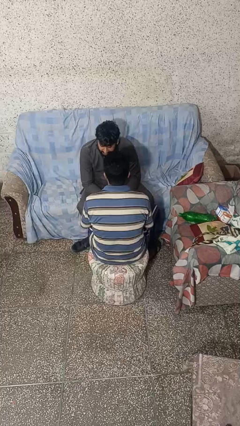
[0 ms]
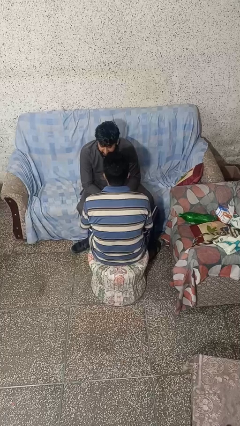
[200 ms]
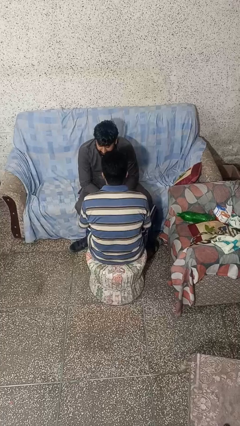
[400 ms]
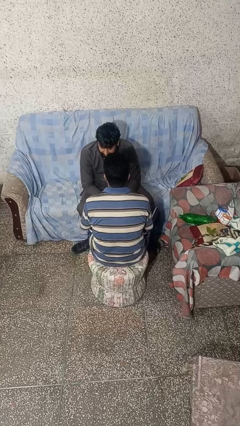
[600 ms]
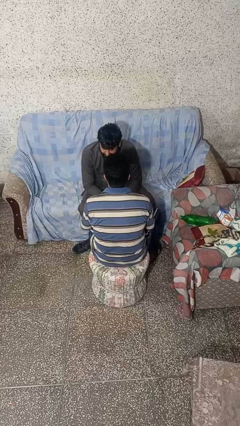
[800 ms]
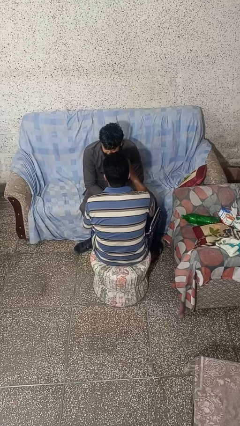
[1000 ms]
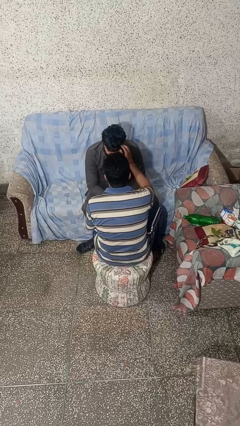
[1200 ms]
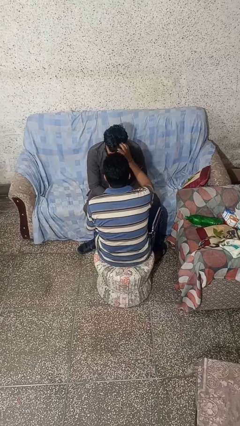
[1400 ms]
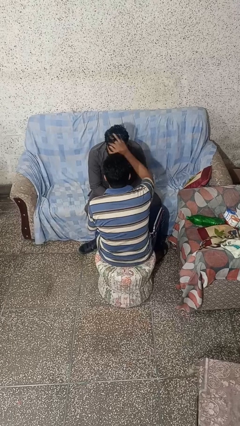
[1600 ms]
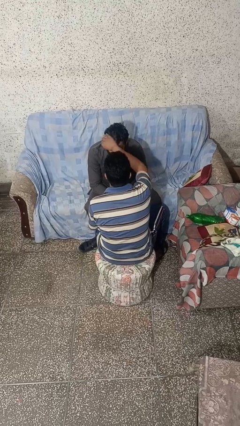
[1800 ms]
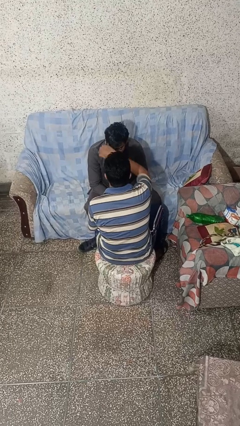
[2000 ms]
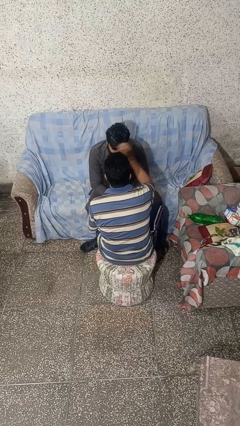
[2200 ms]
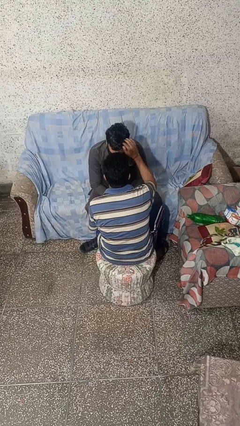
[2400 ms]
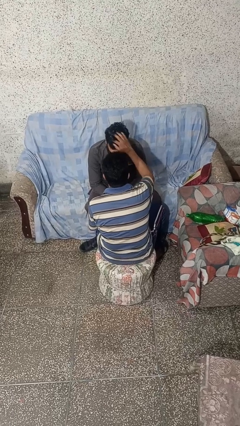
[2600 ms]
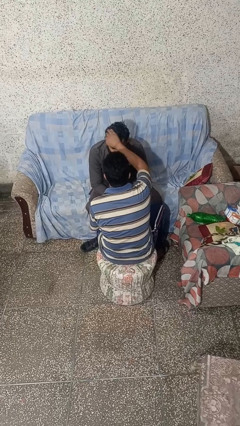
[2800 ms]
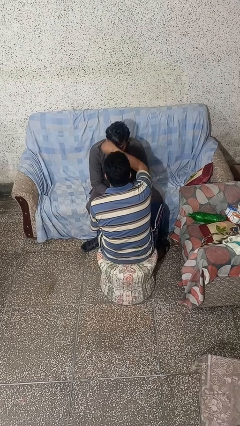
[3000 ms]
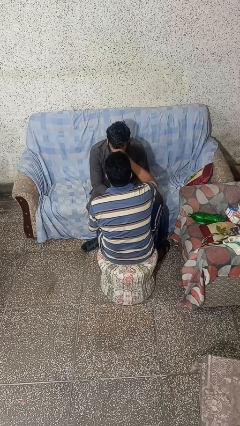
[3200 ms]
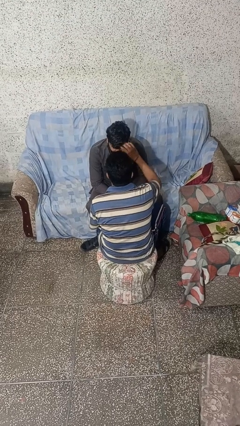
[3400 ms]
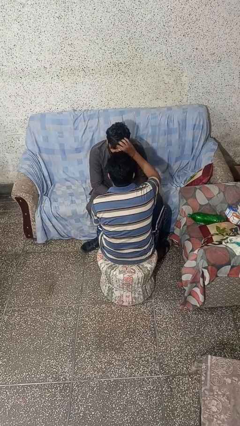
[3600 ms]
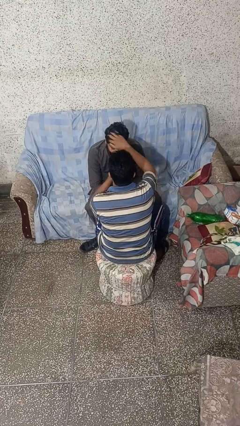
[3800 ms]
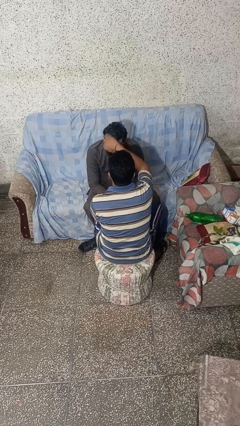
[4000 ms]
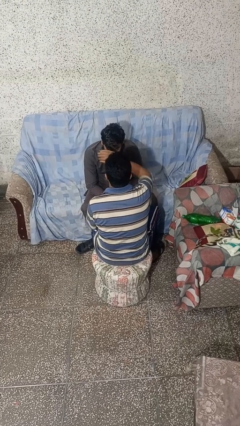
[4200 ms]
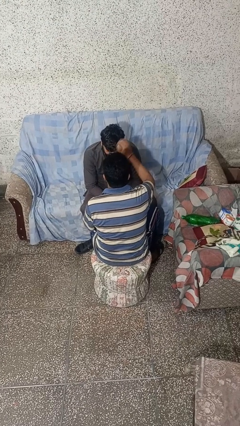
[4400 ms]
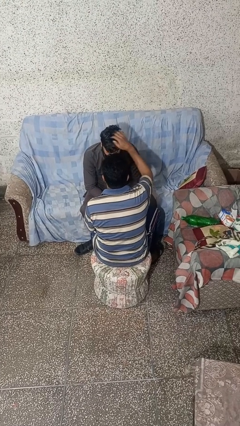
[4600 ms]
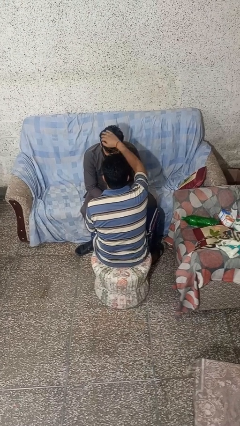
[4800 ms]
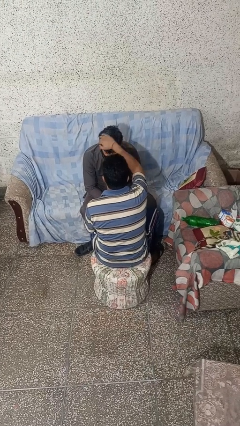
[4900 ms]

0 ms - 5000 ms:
person braids hair of person

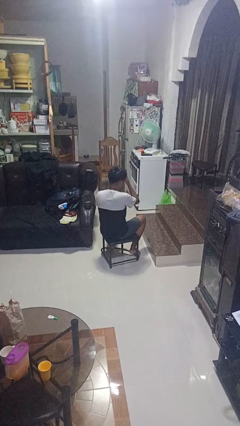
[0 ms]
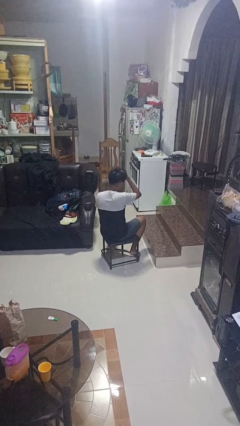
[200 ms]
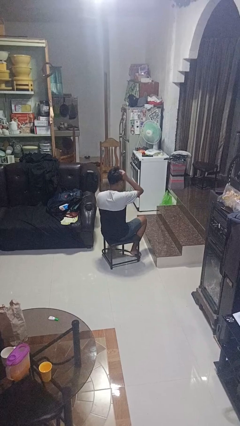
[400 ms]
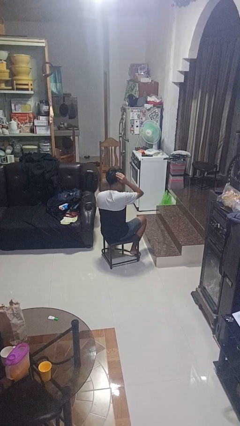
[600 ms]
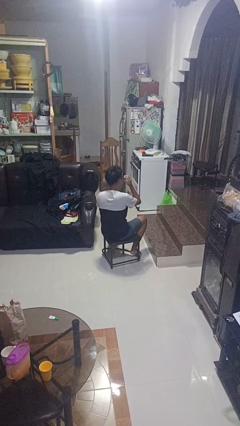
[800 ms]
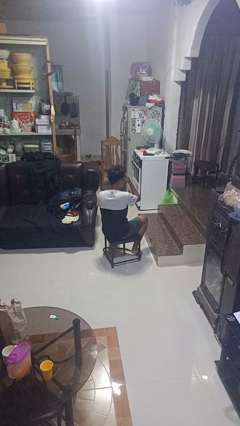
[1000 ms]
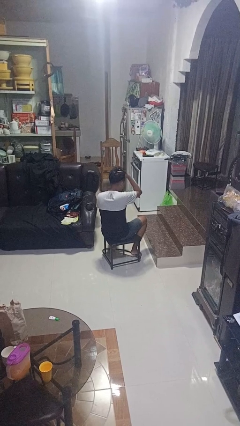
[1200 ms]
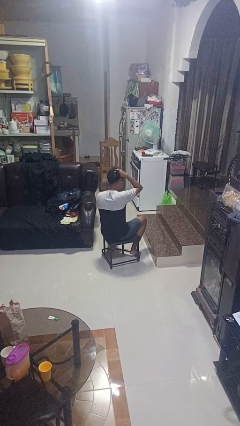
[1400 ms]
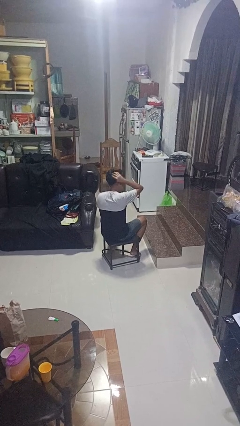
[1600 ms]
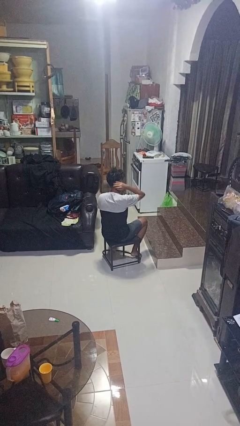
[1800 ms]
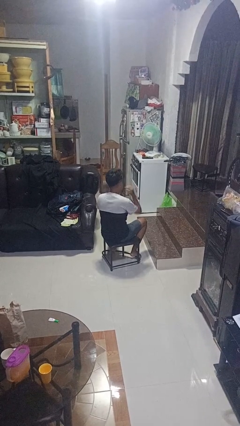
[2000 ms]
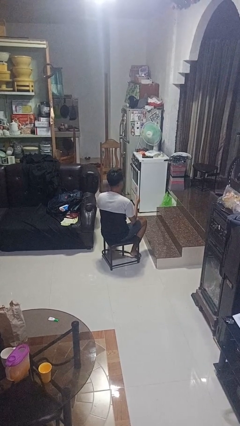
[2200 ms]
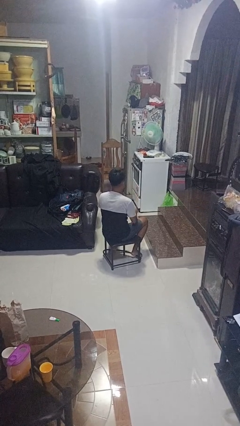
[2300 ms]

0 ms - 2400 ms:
person strokes hair

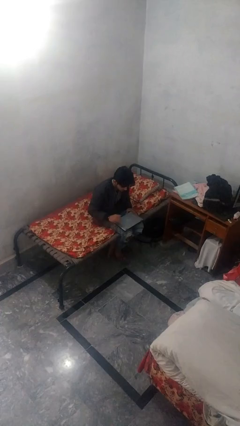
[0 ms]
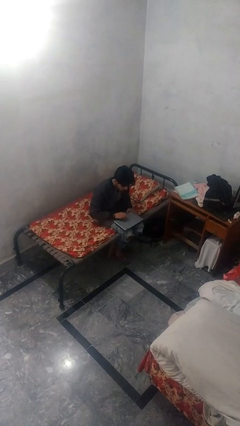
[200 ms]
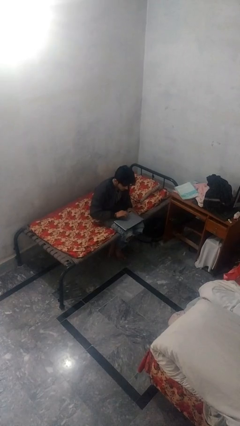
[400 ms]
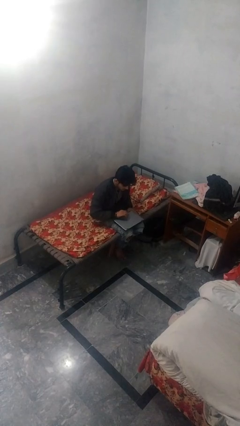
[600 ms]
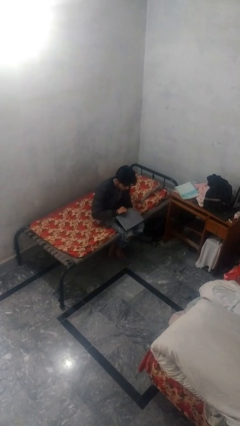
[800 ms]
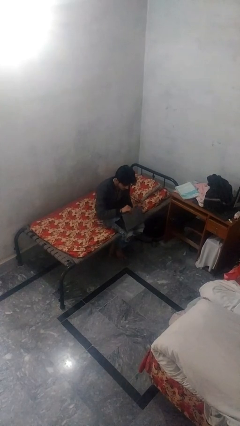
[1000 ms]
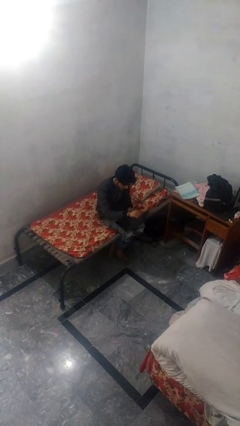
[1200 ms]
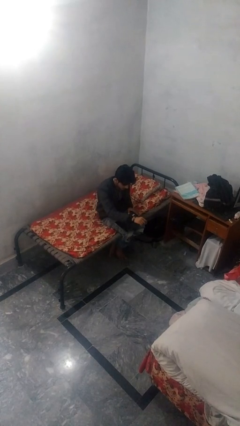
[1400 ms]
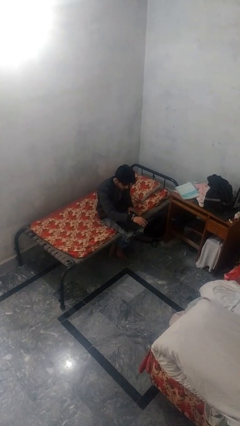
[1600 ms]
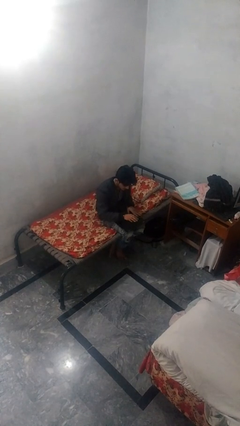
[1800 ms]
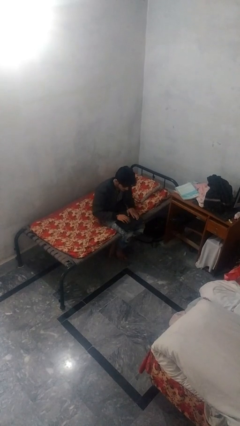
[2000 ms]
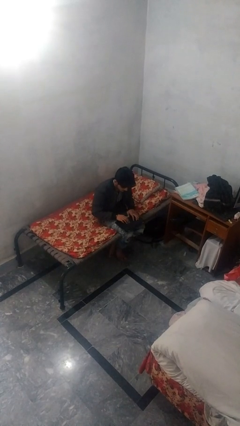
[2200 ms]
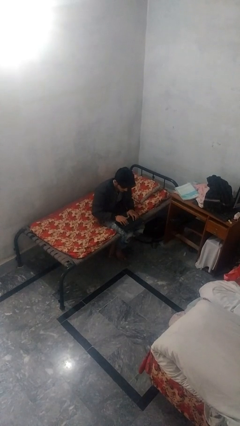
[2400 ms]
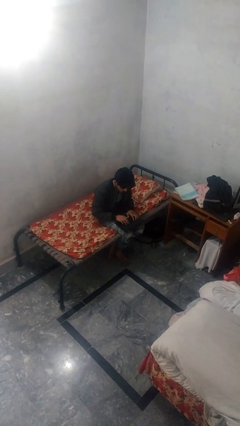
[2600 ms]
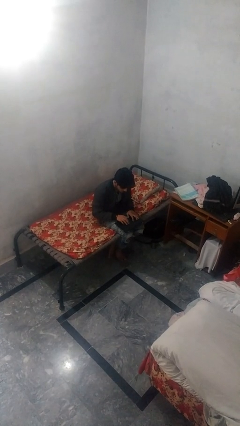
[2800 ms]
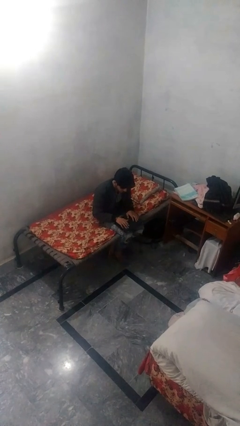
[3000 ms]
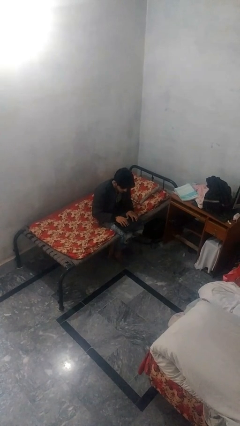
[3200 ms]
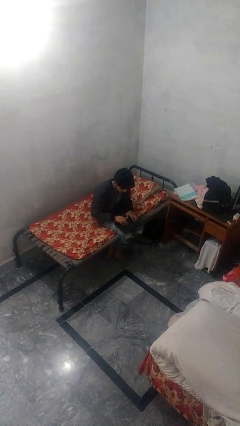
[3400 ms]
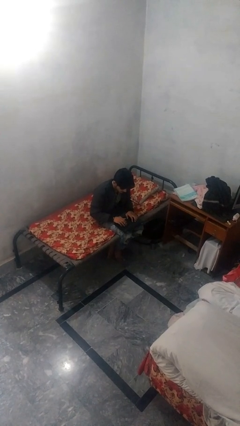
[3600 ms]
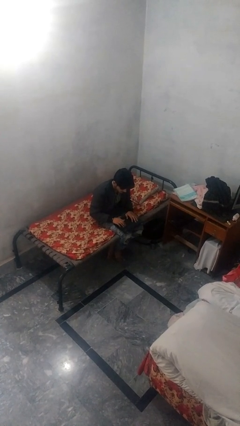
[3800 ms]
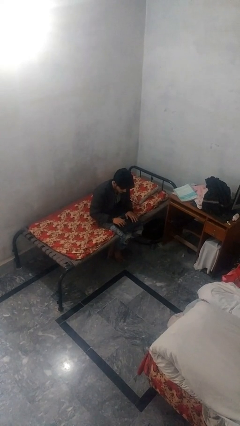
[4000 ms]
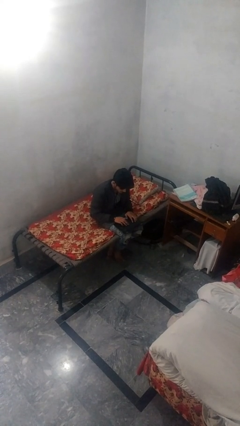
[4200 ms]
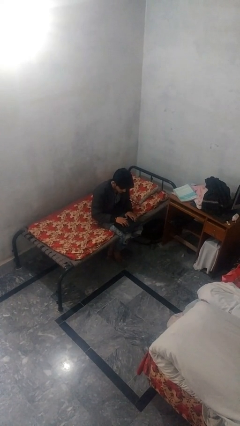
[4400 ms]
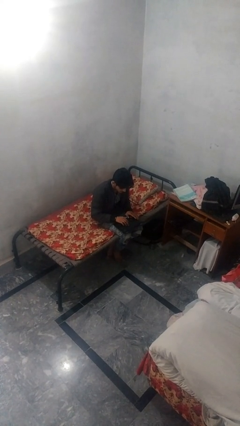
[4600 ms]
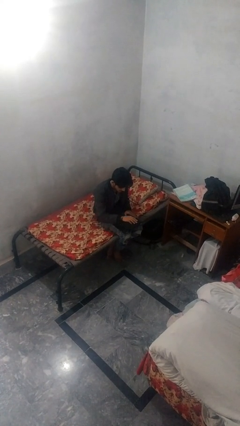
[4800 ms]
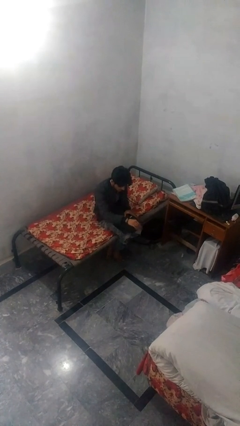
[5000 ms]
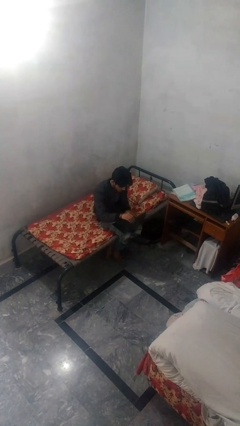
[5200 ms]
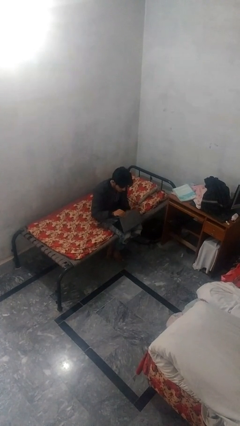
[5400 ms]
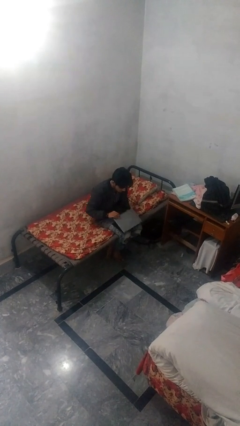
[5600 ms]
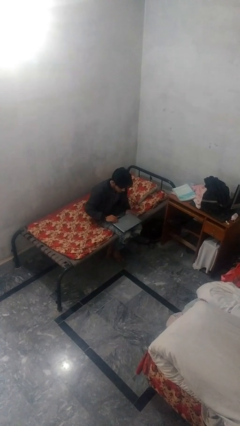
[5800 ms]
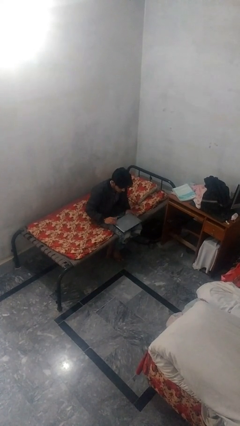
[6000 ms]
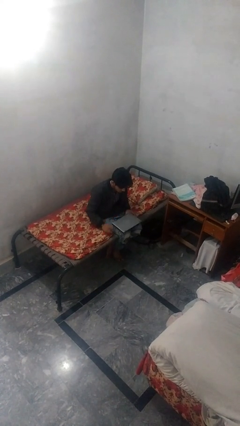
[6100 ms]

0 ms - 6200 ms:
person interacts with laptop

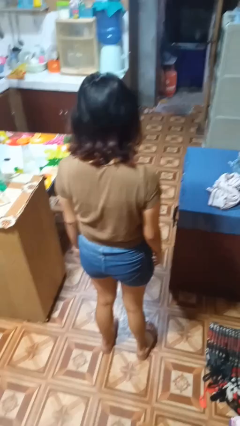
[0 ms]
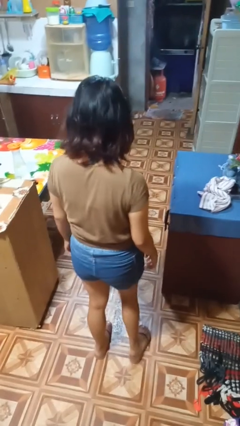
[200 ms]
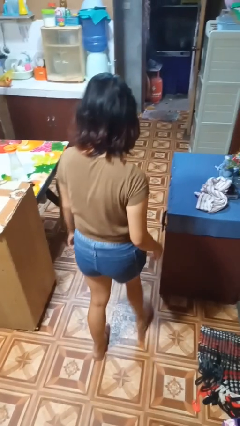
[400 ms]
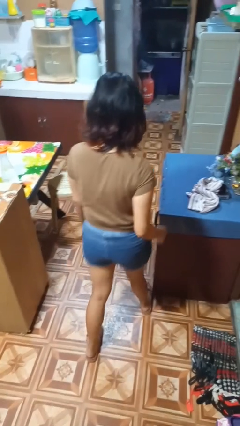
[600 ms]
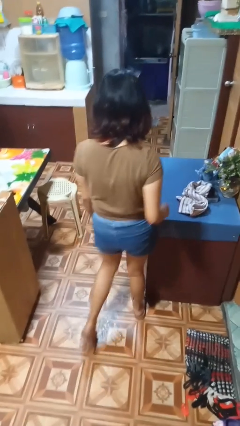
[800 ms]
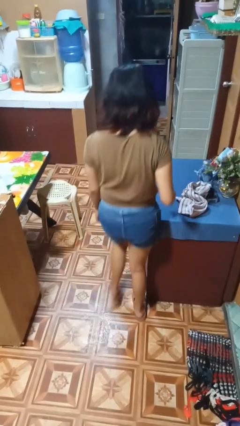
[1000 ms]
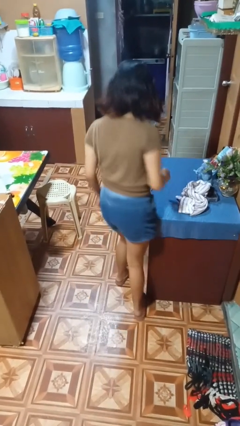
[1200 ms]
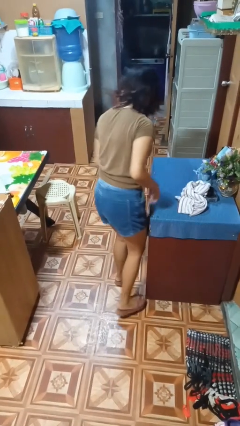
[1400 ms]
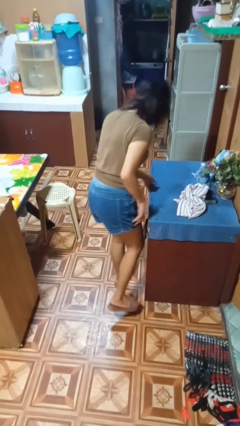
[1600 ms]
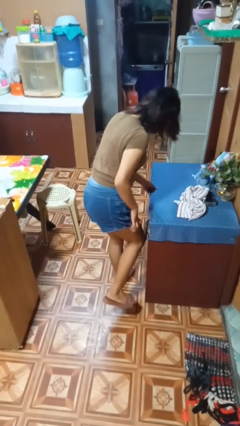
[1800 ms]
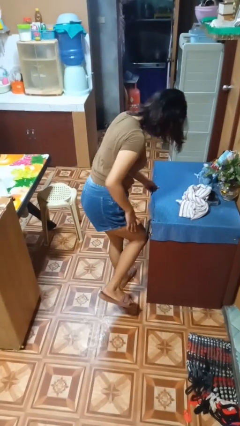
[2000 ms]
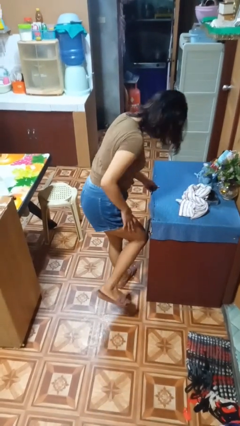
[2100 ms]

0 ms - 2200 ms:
person bumps into table

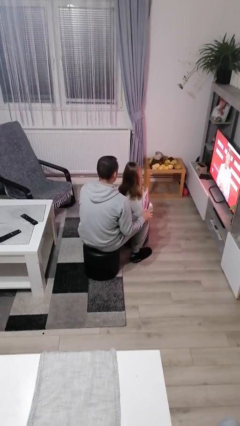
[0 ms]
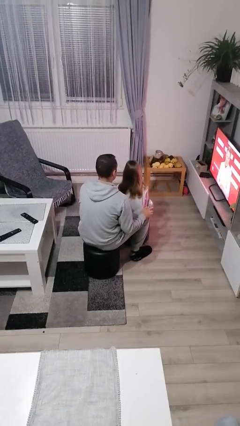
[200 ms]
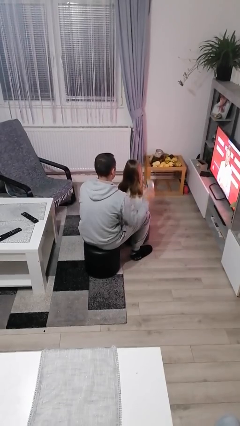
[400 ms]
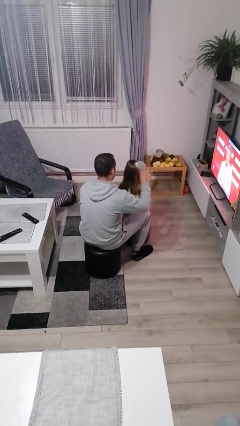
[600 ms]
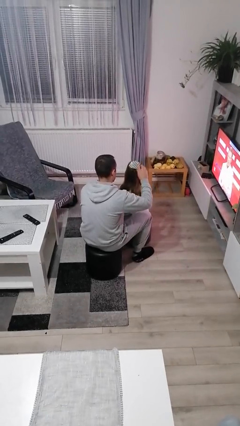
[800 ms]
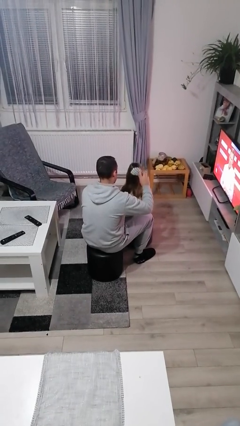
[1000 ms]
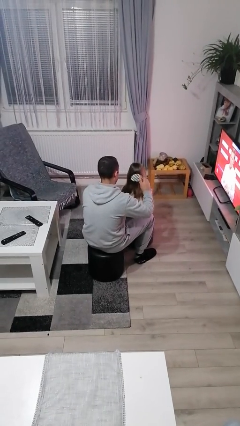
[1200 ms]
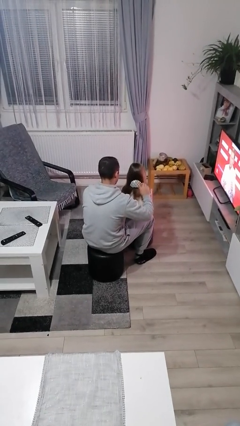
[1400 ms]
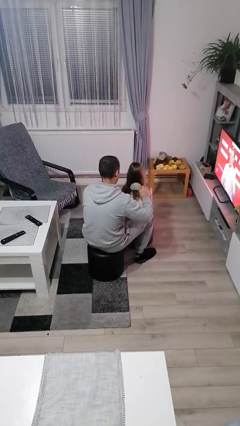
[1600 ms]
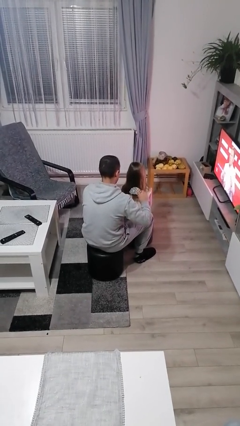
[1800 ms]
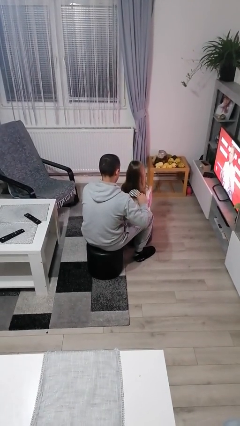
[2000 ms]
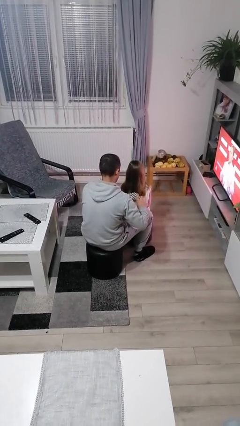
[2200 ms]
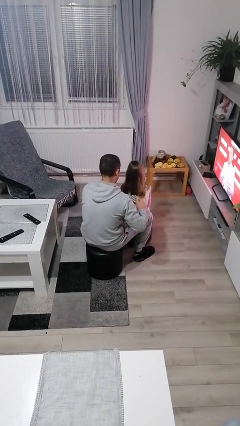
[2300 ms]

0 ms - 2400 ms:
person brushes hair of person
